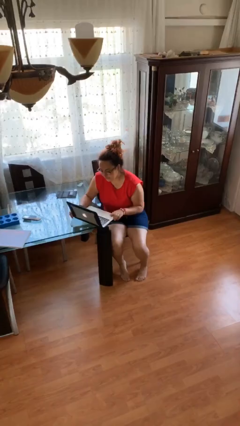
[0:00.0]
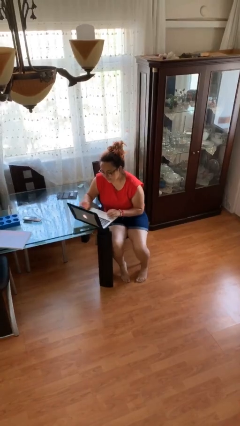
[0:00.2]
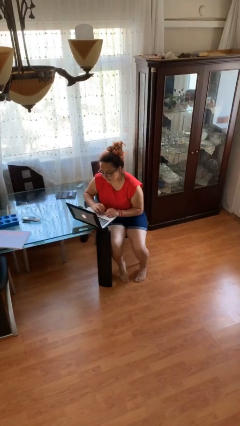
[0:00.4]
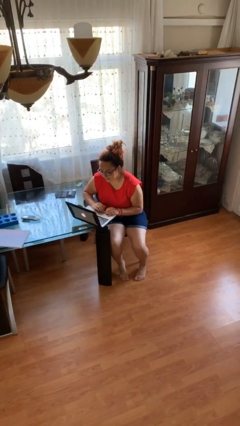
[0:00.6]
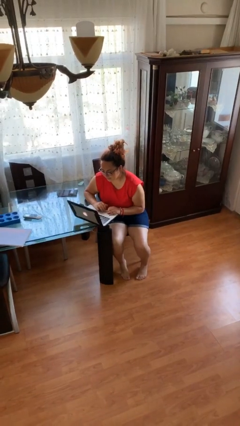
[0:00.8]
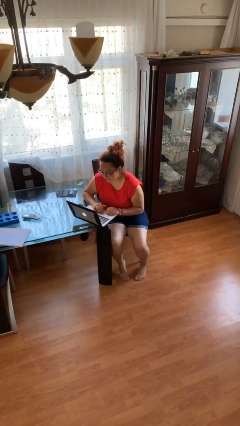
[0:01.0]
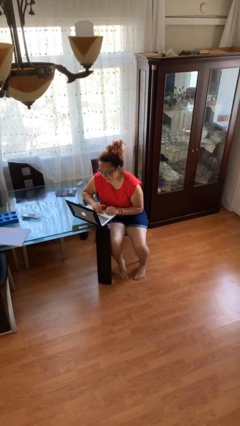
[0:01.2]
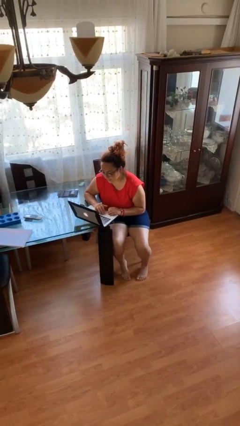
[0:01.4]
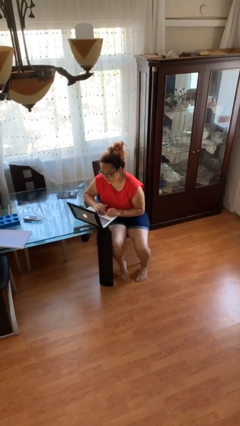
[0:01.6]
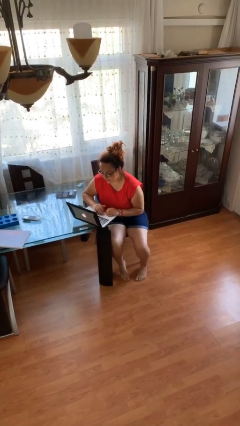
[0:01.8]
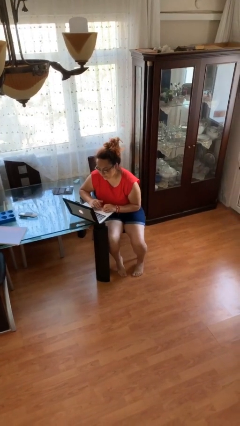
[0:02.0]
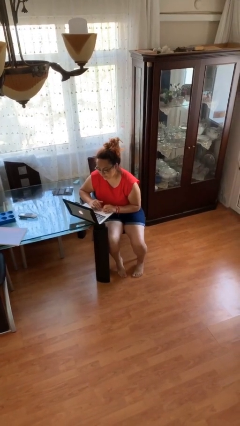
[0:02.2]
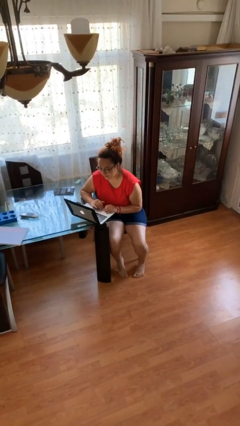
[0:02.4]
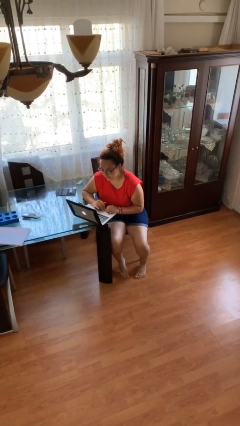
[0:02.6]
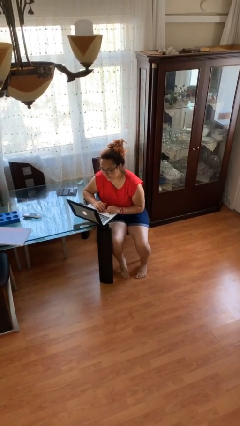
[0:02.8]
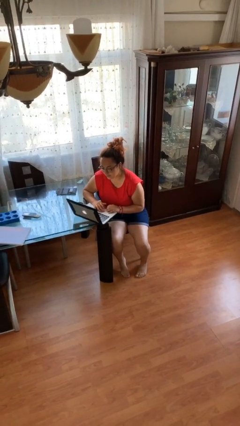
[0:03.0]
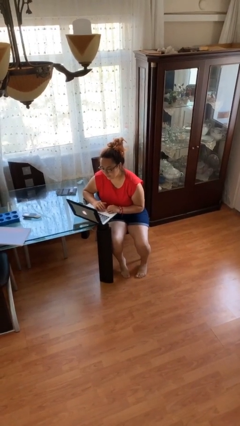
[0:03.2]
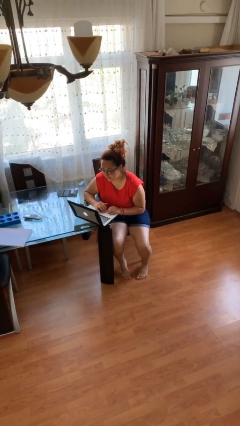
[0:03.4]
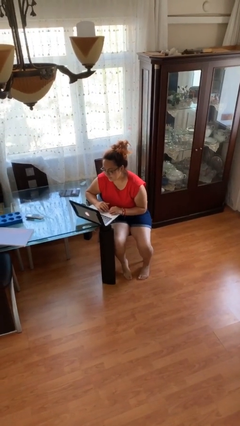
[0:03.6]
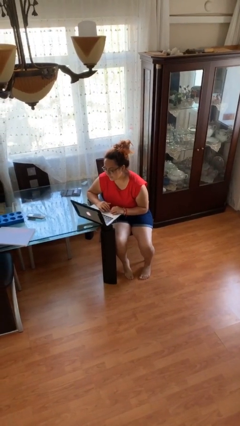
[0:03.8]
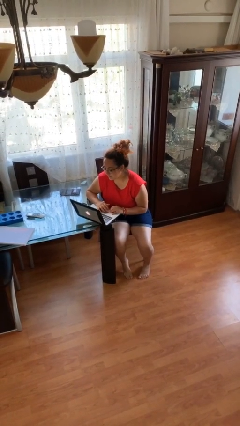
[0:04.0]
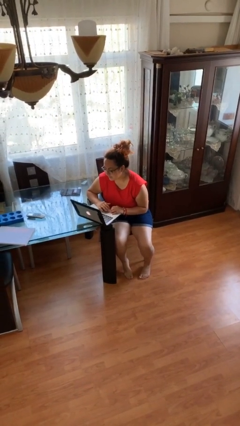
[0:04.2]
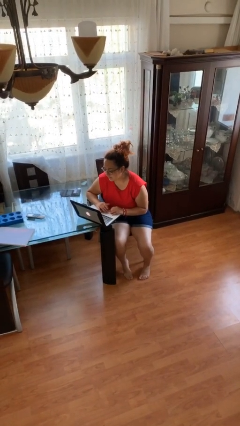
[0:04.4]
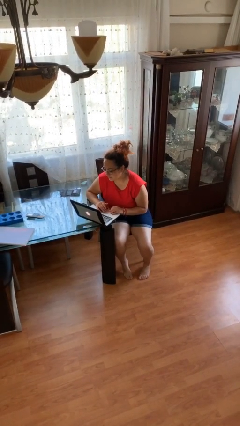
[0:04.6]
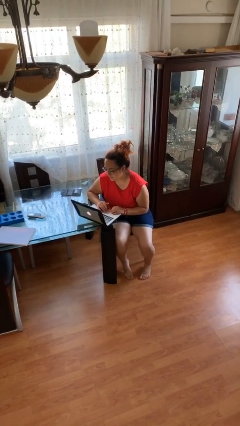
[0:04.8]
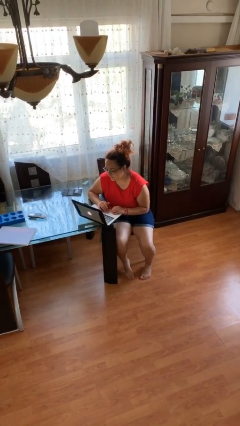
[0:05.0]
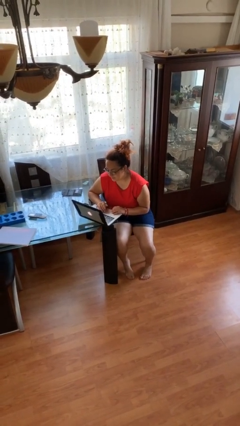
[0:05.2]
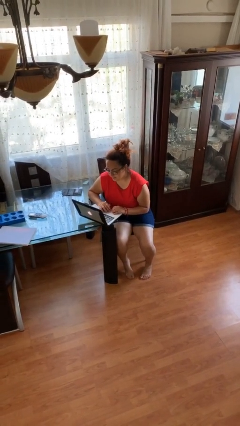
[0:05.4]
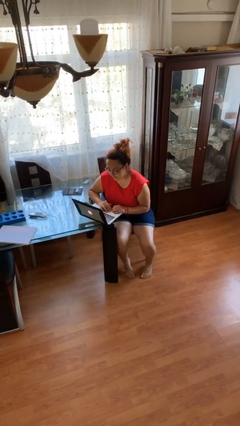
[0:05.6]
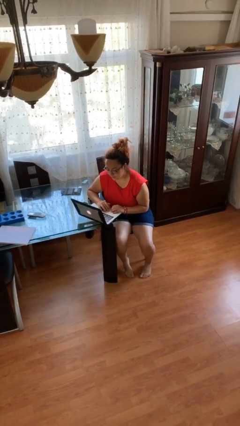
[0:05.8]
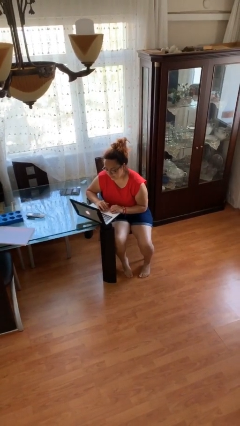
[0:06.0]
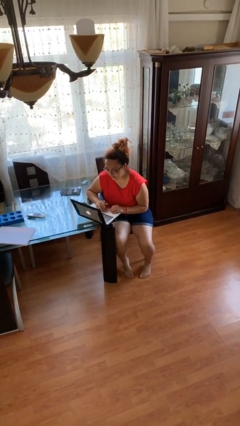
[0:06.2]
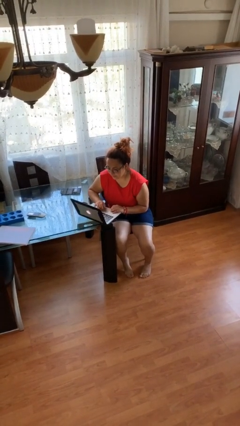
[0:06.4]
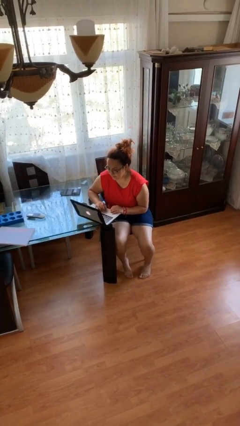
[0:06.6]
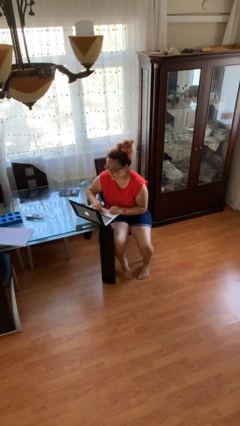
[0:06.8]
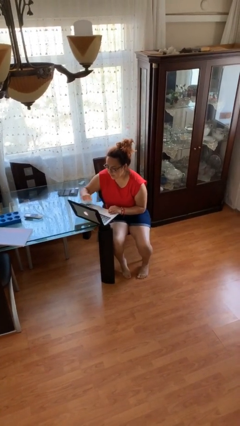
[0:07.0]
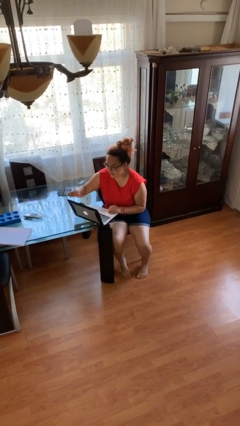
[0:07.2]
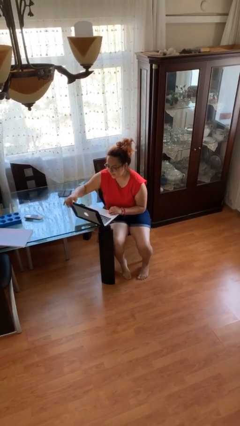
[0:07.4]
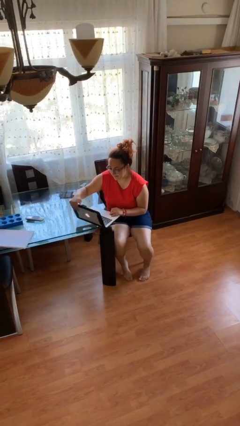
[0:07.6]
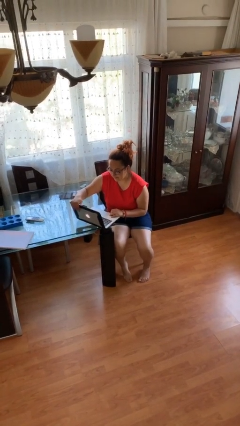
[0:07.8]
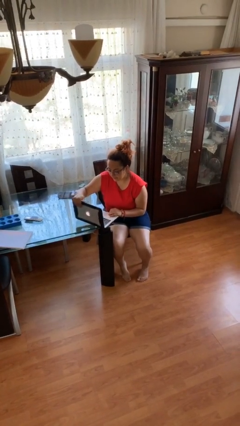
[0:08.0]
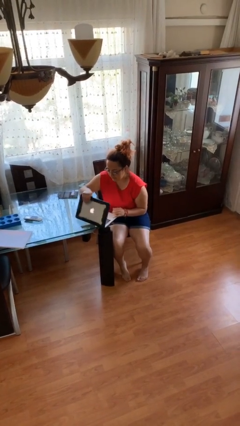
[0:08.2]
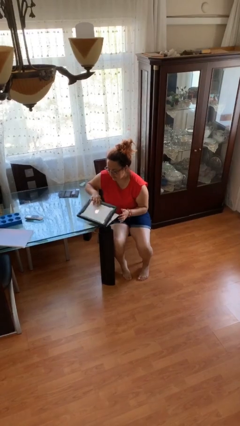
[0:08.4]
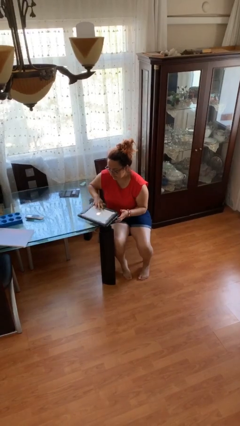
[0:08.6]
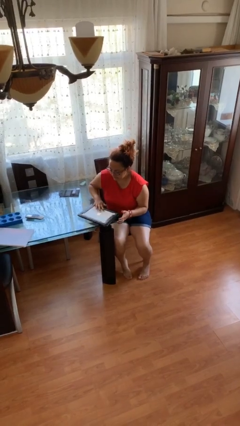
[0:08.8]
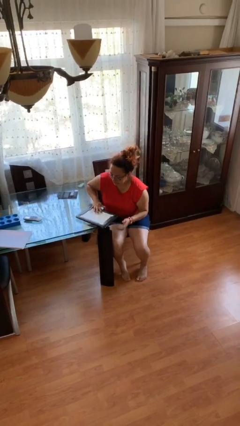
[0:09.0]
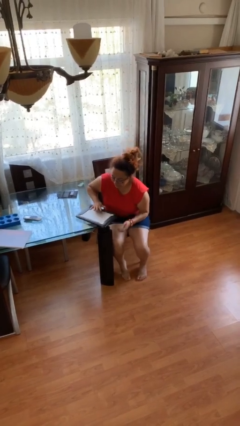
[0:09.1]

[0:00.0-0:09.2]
person interacts with laptop

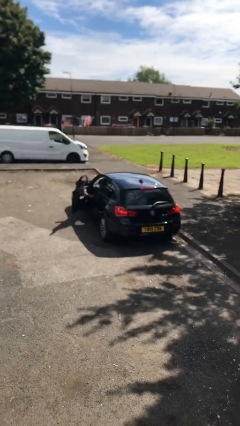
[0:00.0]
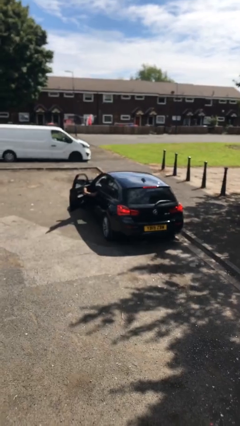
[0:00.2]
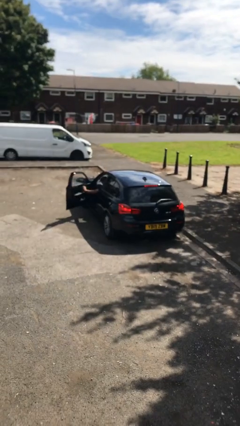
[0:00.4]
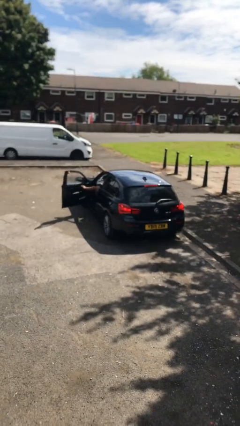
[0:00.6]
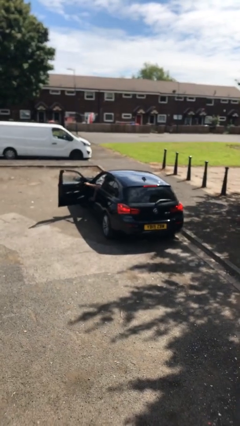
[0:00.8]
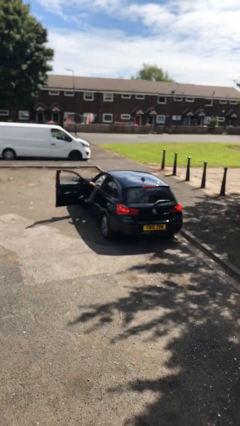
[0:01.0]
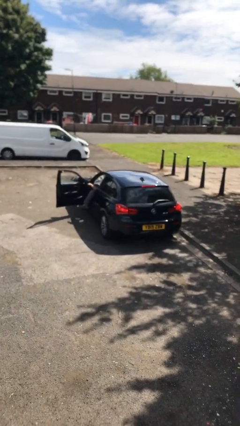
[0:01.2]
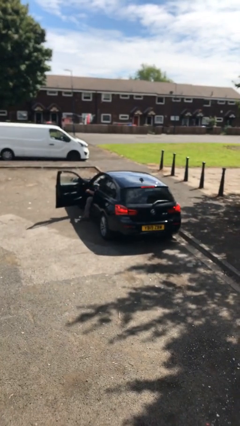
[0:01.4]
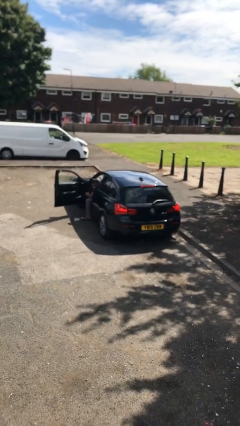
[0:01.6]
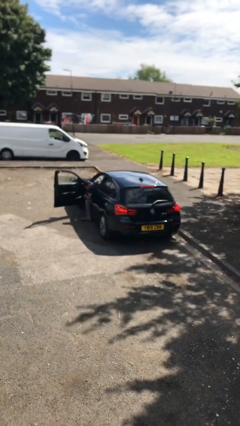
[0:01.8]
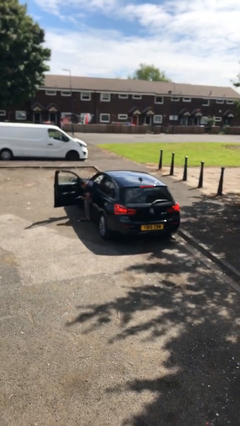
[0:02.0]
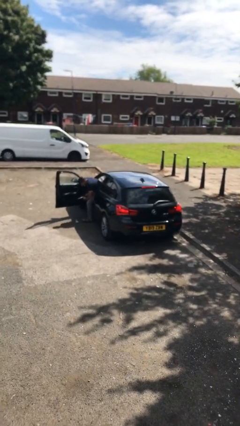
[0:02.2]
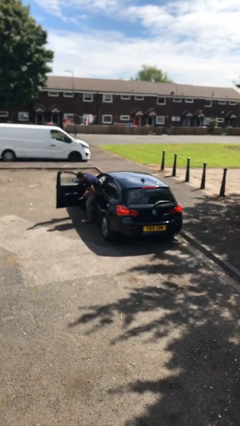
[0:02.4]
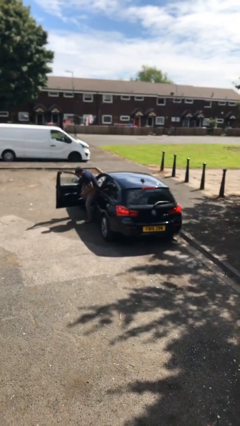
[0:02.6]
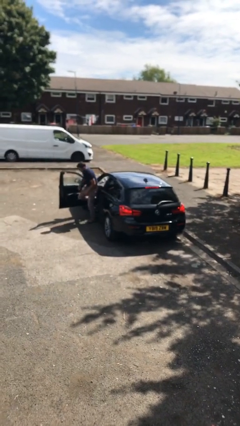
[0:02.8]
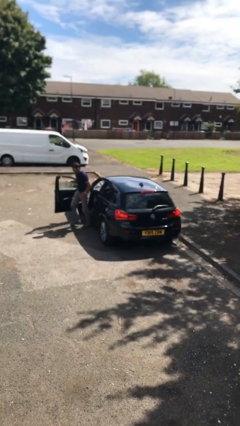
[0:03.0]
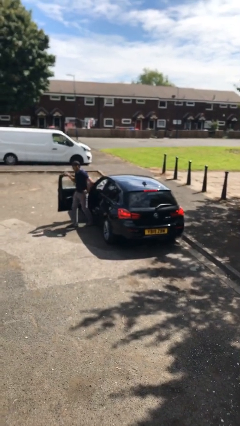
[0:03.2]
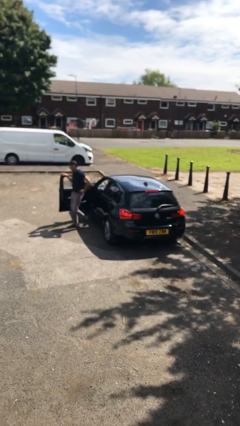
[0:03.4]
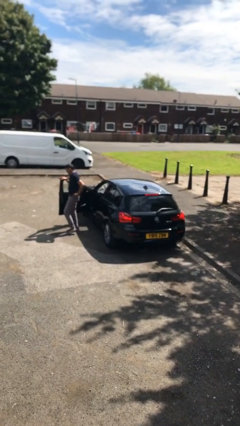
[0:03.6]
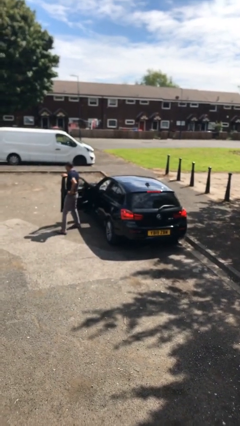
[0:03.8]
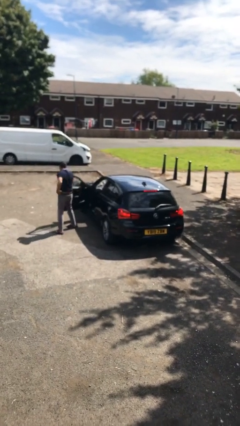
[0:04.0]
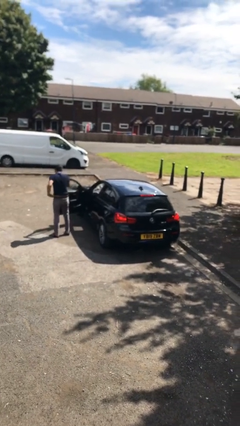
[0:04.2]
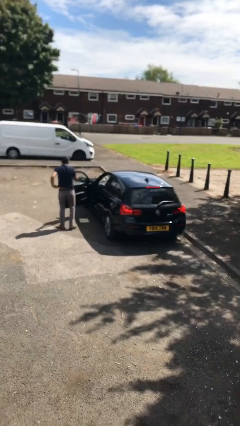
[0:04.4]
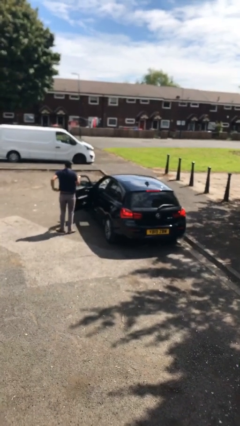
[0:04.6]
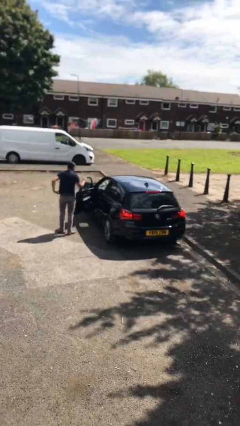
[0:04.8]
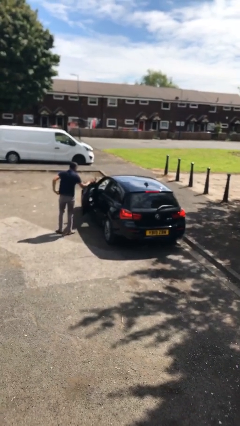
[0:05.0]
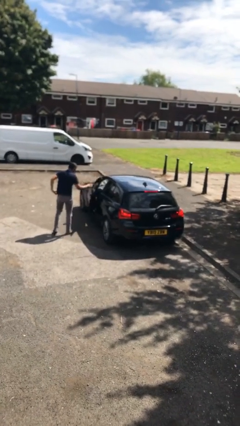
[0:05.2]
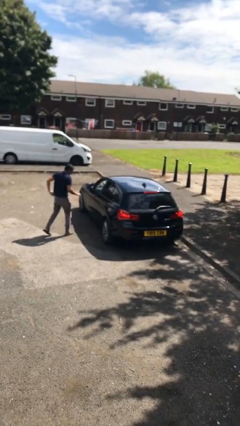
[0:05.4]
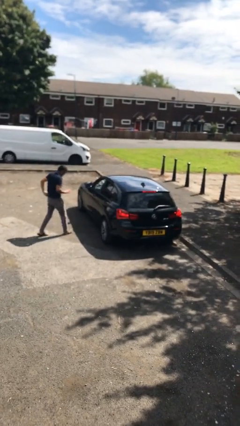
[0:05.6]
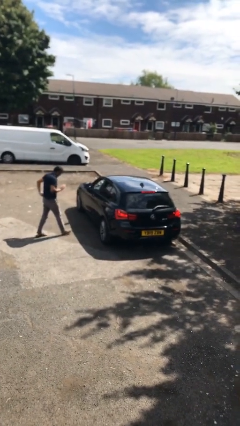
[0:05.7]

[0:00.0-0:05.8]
car drops off person

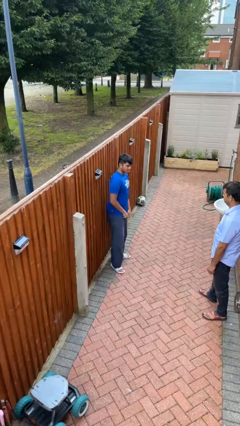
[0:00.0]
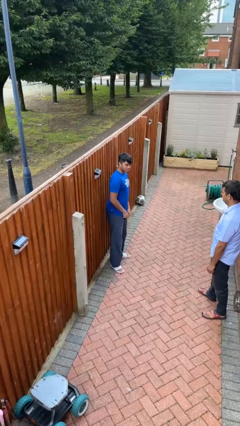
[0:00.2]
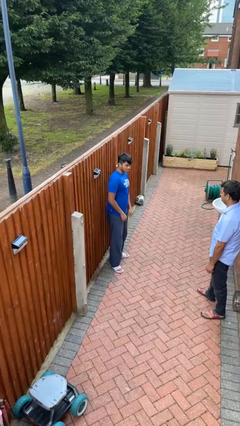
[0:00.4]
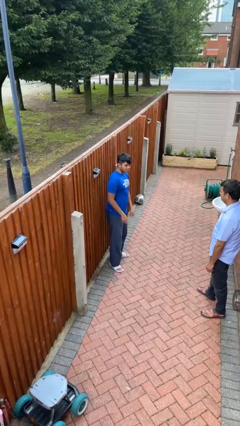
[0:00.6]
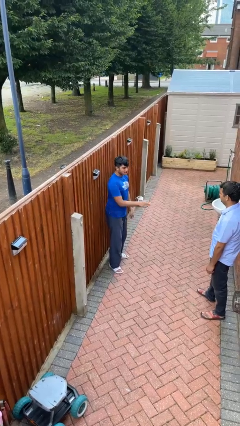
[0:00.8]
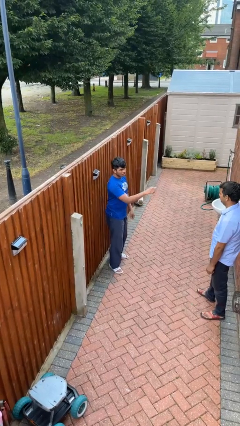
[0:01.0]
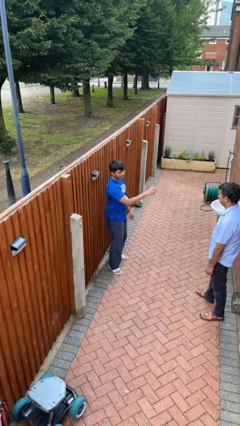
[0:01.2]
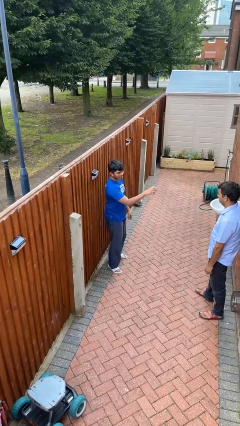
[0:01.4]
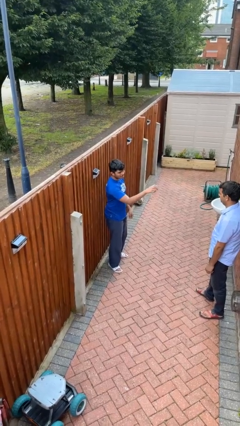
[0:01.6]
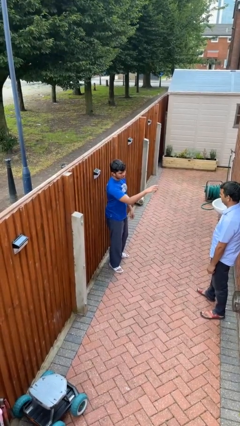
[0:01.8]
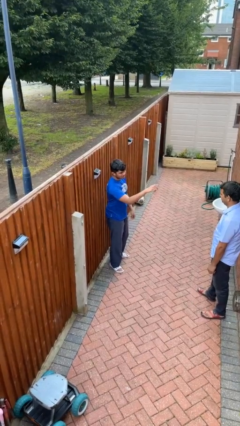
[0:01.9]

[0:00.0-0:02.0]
person points at person

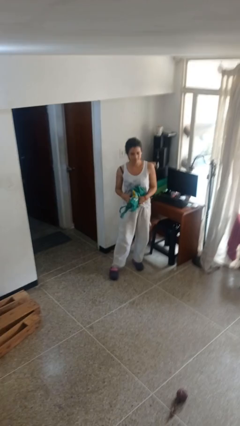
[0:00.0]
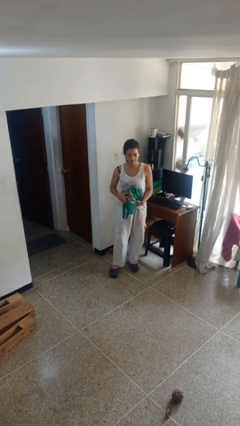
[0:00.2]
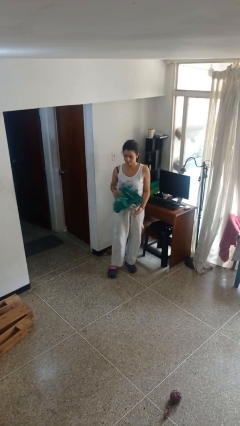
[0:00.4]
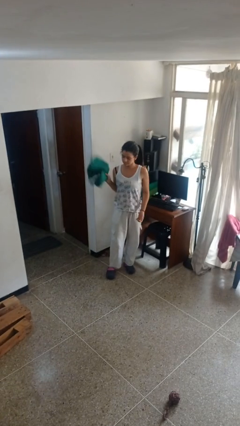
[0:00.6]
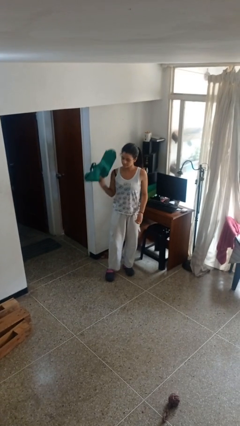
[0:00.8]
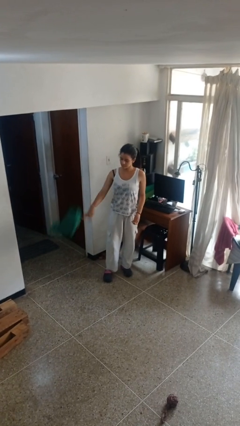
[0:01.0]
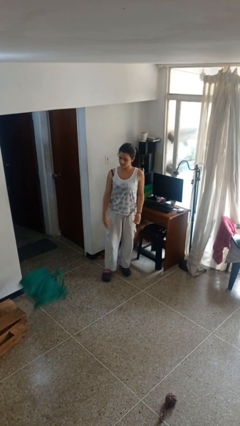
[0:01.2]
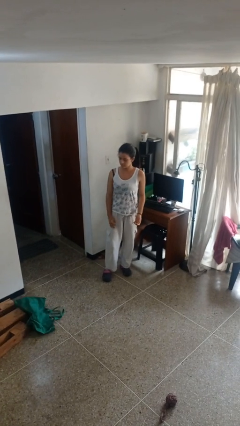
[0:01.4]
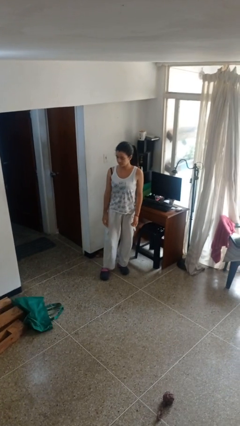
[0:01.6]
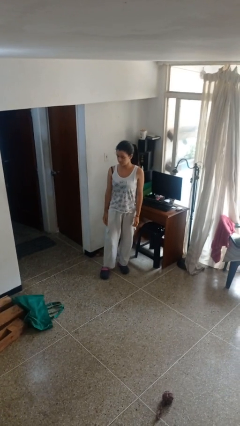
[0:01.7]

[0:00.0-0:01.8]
person throws object to ground
